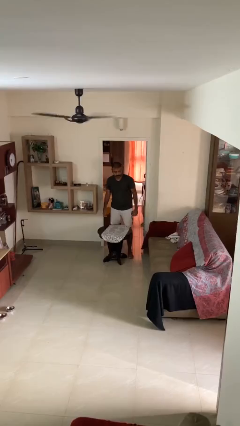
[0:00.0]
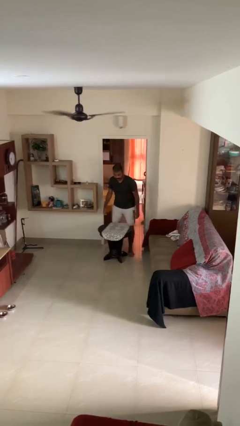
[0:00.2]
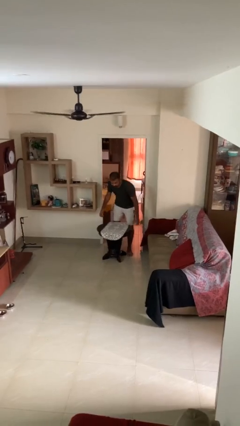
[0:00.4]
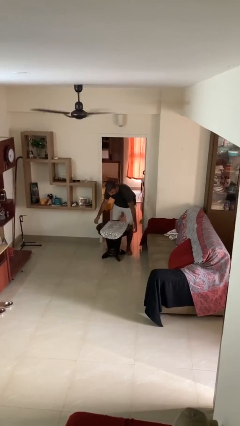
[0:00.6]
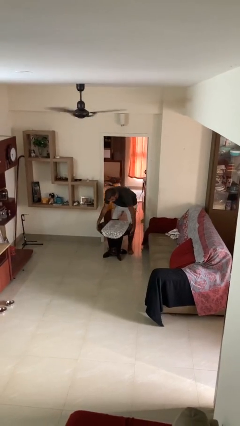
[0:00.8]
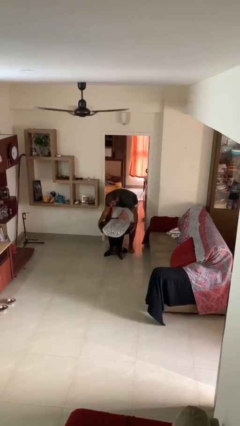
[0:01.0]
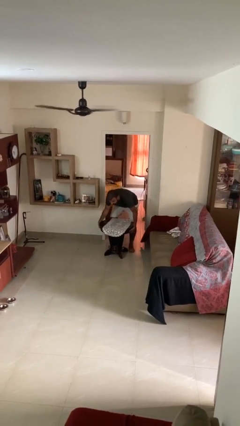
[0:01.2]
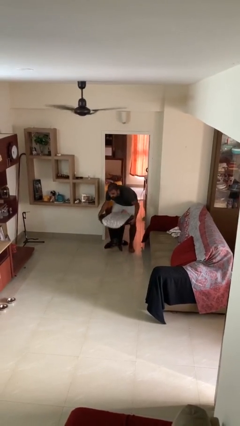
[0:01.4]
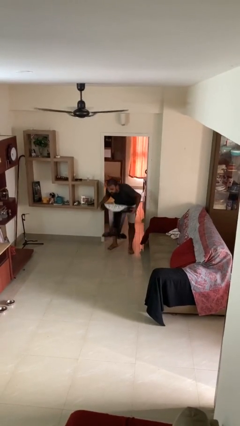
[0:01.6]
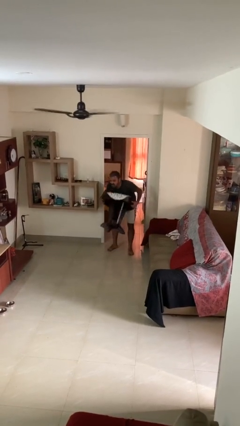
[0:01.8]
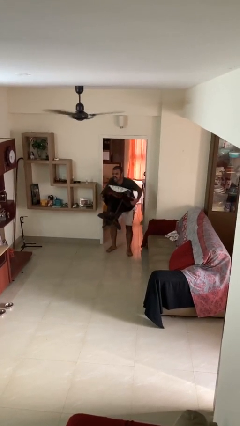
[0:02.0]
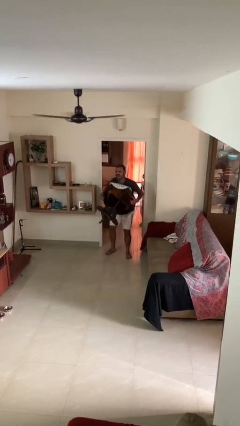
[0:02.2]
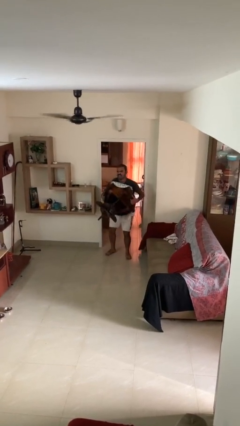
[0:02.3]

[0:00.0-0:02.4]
person picks up object from floor

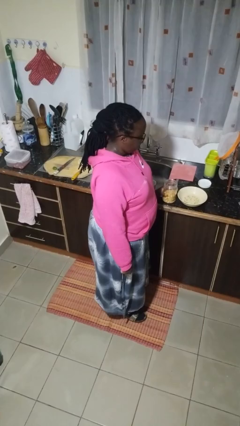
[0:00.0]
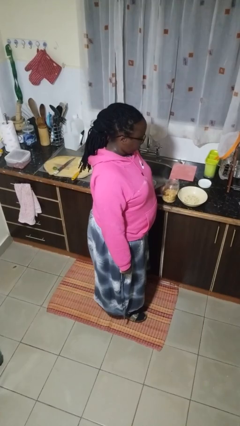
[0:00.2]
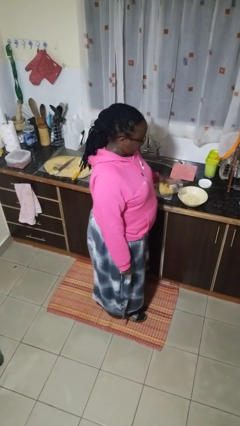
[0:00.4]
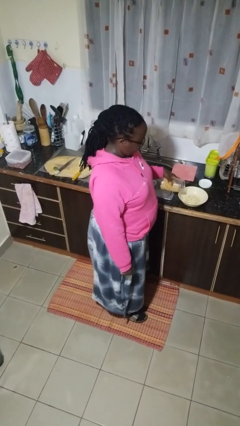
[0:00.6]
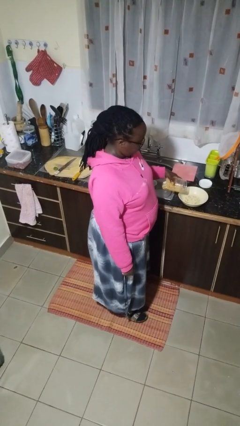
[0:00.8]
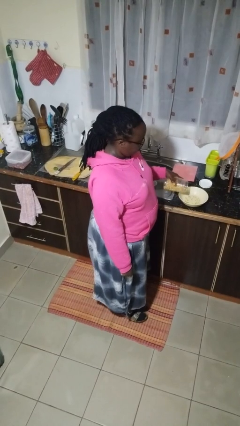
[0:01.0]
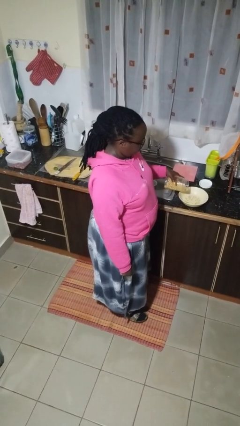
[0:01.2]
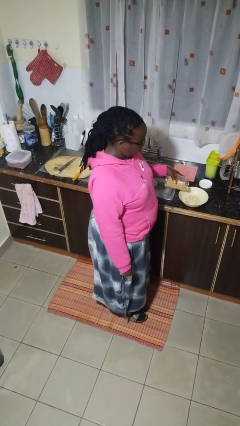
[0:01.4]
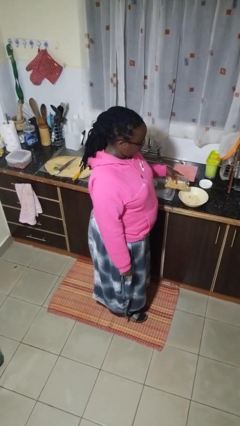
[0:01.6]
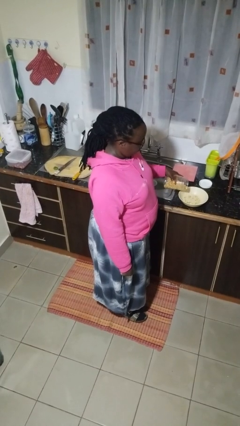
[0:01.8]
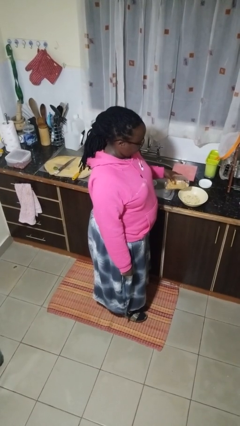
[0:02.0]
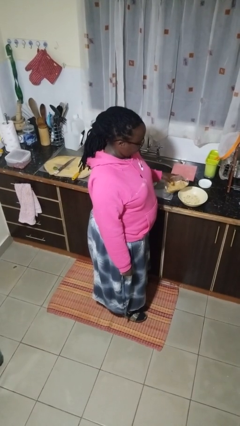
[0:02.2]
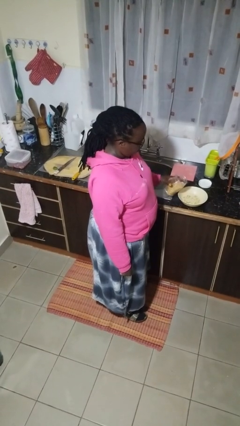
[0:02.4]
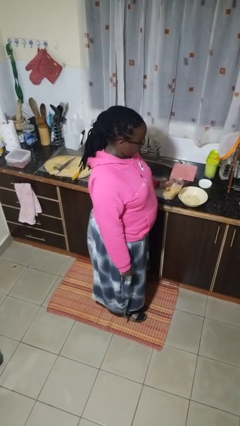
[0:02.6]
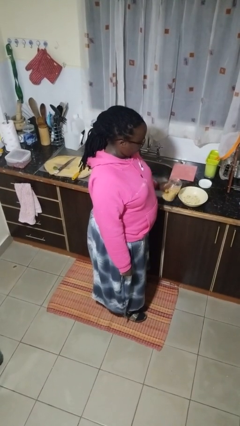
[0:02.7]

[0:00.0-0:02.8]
person pours into bowl

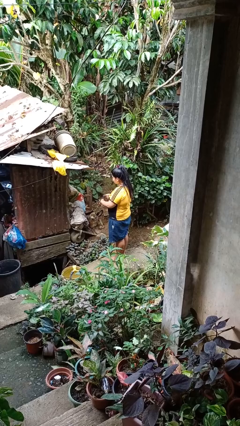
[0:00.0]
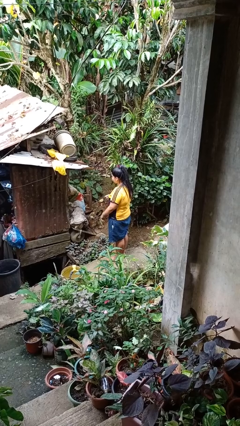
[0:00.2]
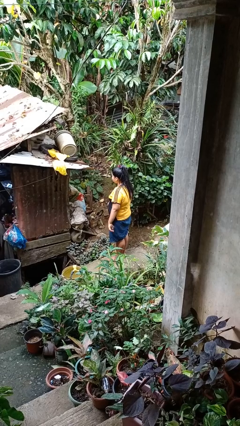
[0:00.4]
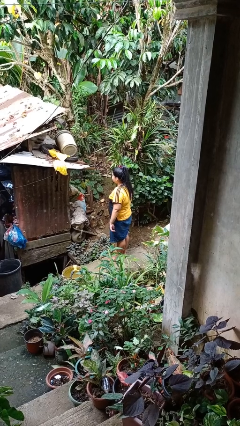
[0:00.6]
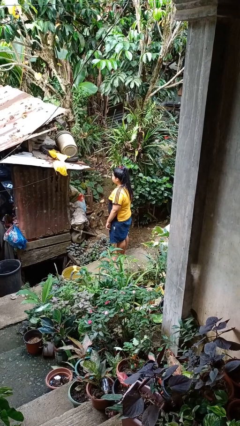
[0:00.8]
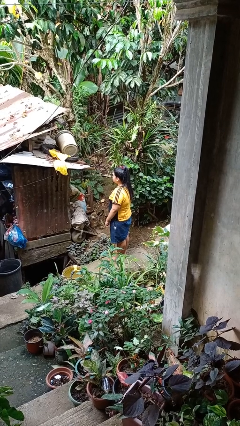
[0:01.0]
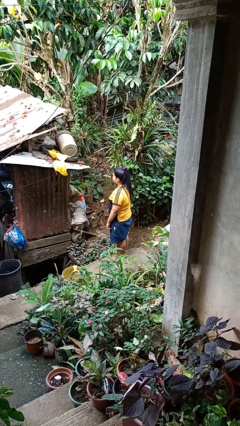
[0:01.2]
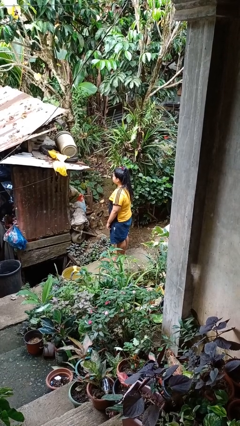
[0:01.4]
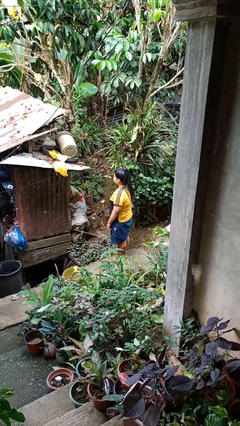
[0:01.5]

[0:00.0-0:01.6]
person takes off wristwatch

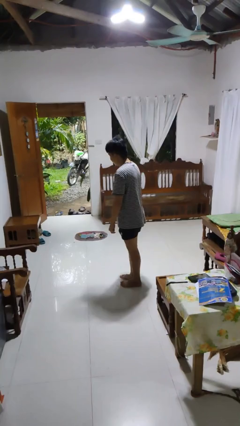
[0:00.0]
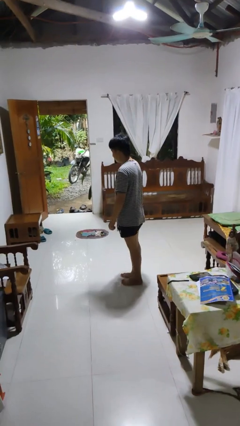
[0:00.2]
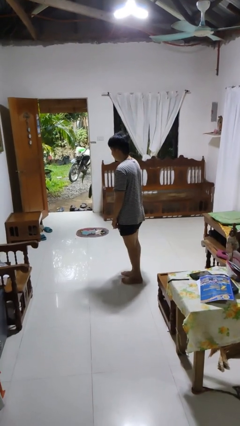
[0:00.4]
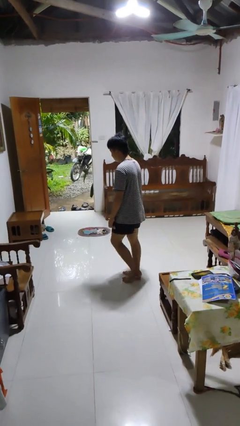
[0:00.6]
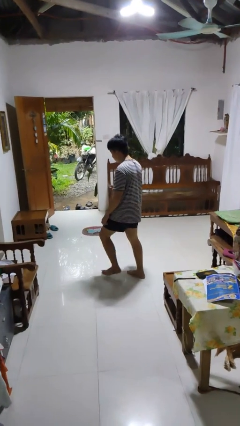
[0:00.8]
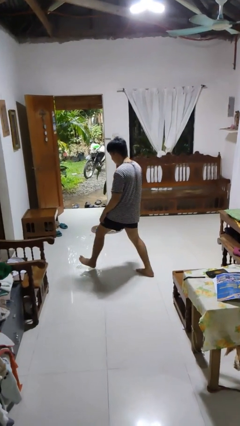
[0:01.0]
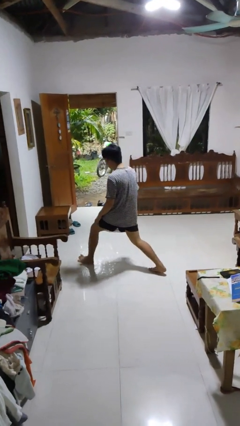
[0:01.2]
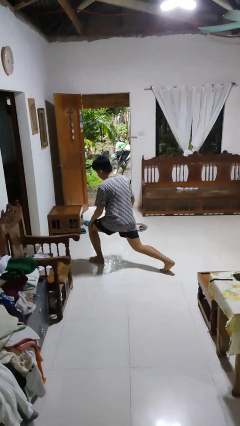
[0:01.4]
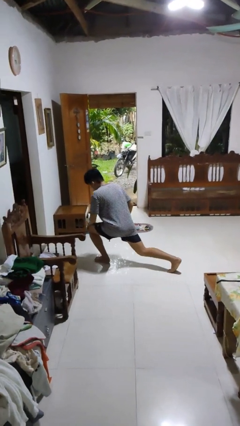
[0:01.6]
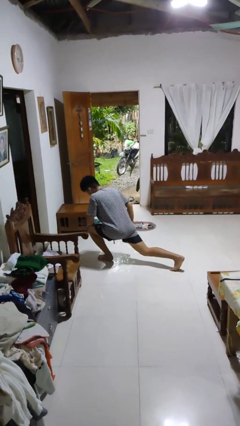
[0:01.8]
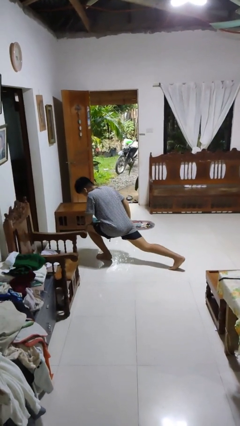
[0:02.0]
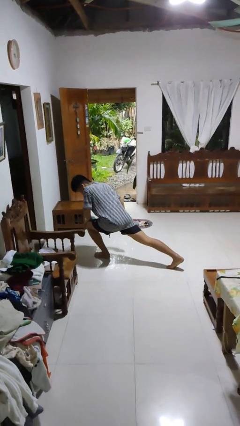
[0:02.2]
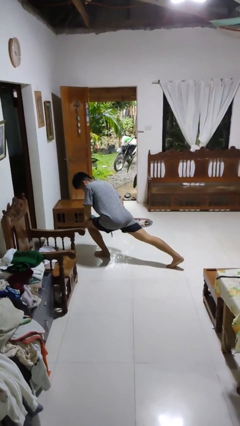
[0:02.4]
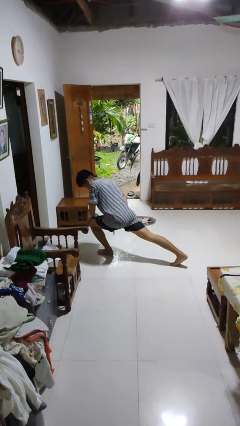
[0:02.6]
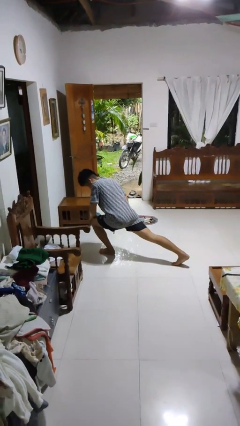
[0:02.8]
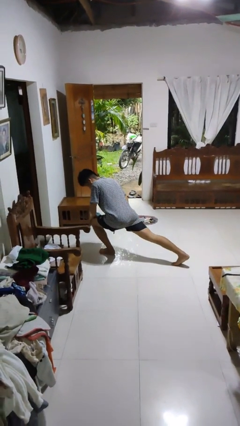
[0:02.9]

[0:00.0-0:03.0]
person exercises with lunges

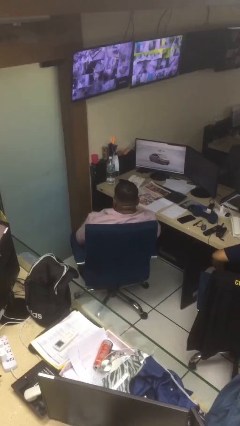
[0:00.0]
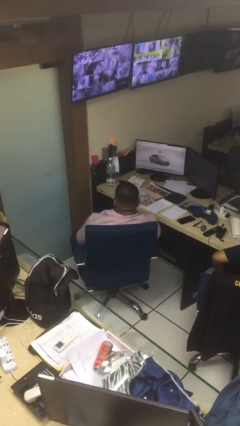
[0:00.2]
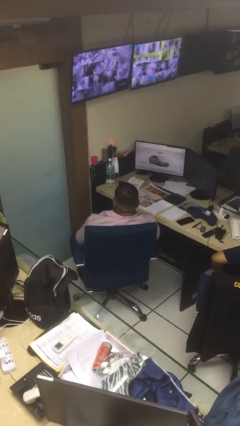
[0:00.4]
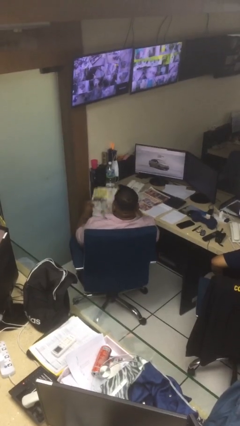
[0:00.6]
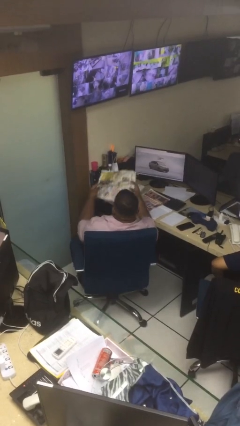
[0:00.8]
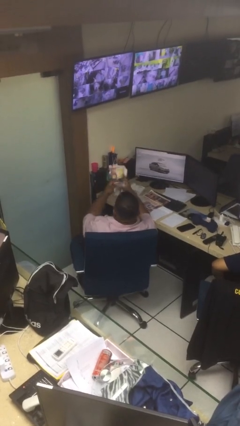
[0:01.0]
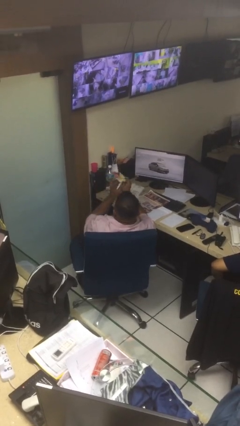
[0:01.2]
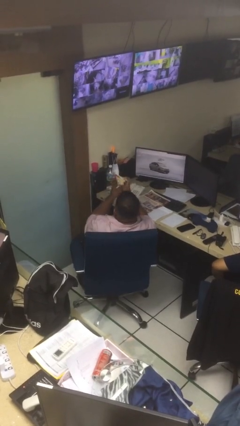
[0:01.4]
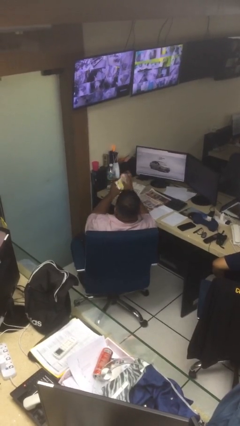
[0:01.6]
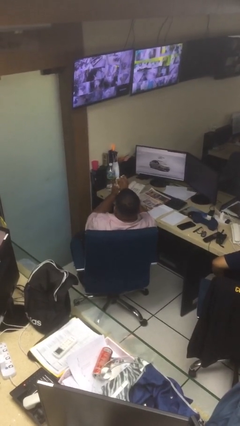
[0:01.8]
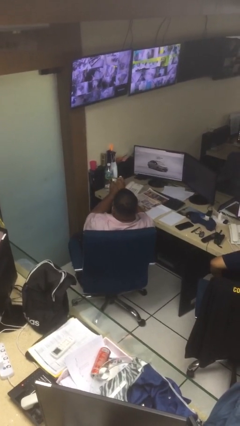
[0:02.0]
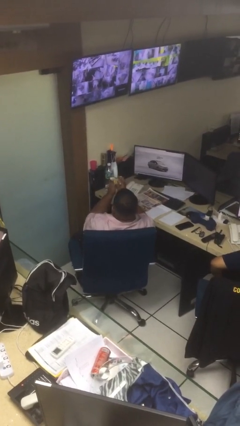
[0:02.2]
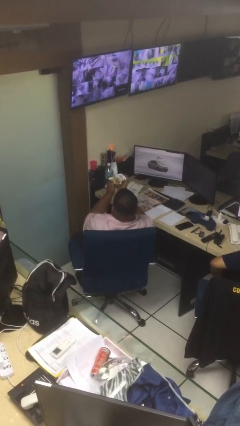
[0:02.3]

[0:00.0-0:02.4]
person crumples paper

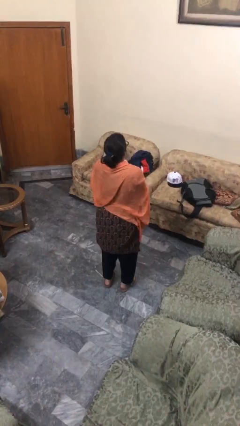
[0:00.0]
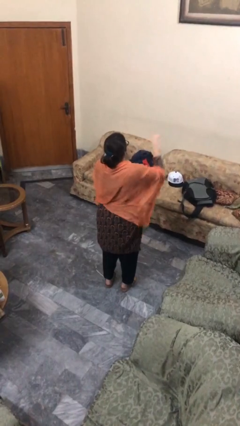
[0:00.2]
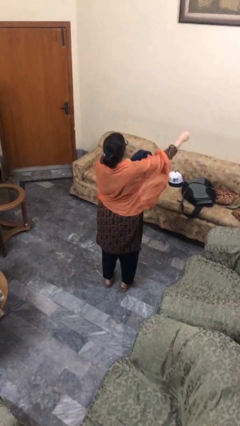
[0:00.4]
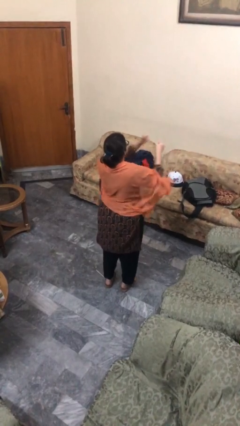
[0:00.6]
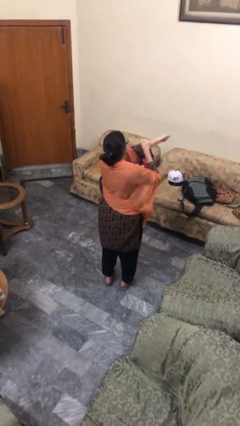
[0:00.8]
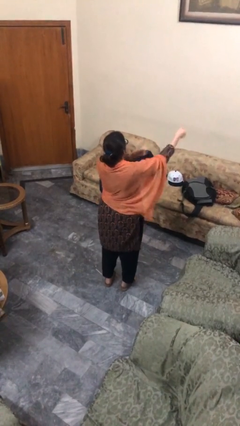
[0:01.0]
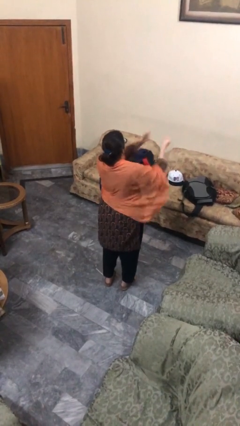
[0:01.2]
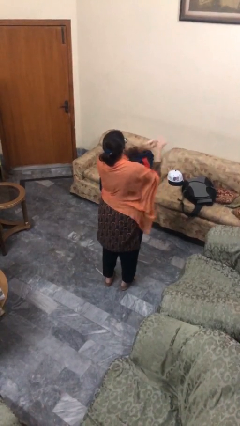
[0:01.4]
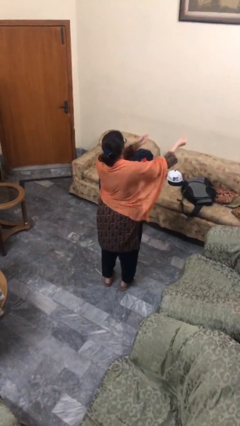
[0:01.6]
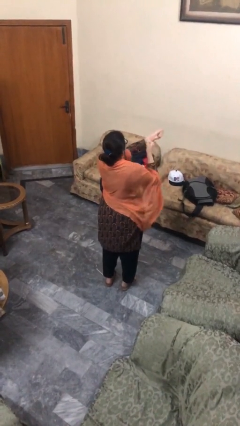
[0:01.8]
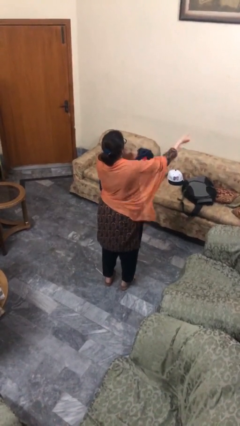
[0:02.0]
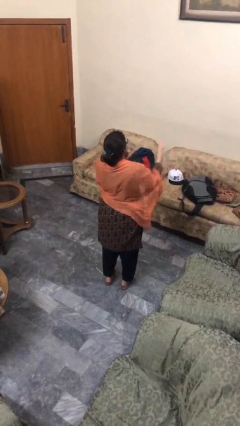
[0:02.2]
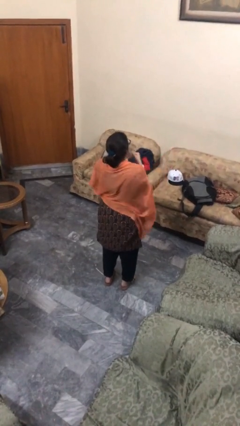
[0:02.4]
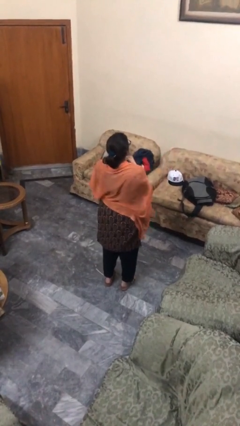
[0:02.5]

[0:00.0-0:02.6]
person punches

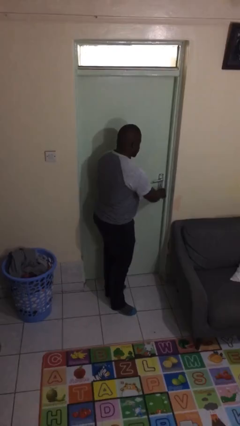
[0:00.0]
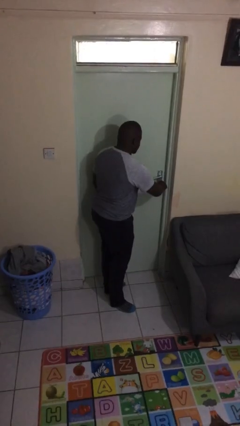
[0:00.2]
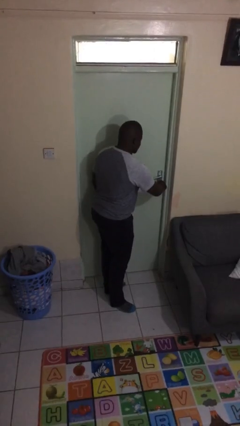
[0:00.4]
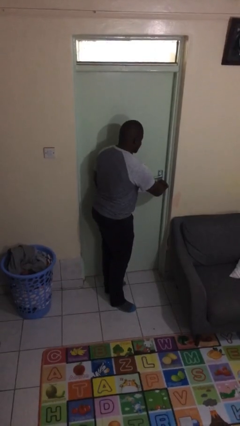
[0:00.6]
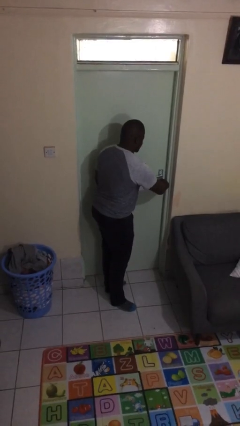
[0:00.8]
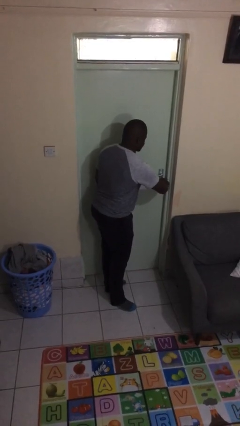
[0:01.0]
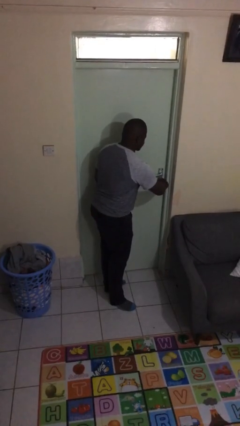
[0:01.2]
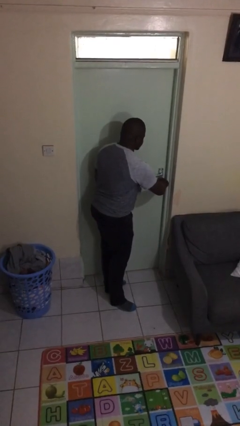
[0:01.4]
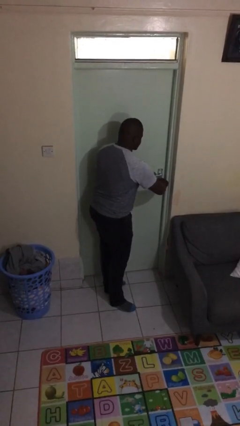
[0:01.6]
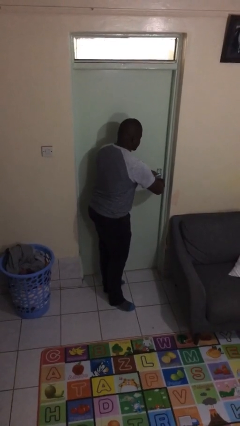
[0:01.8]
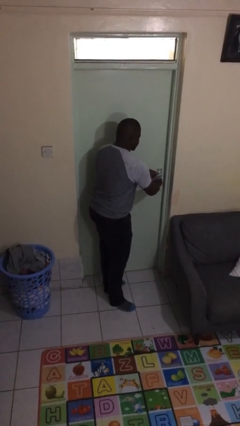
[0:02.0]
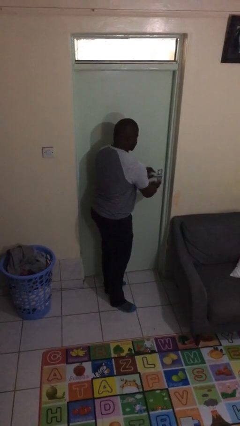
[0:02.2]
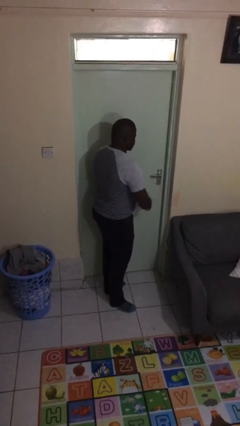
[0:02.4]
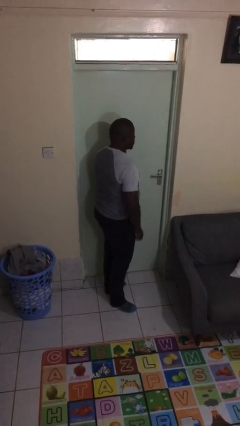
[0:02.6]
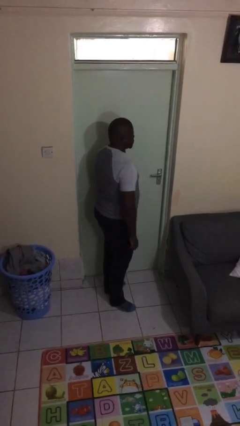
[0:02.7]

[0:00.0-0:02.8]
person locks door with keys
